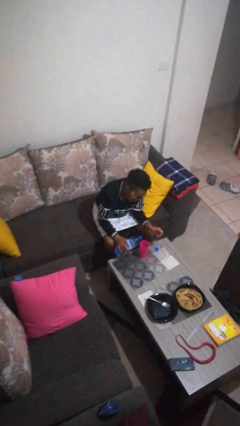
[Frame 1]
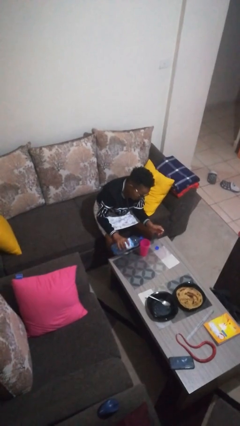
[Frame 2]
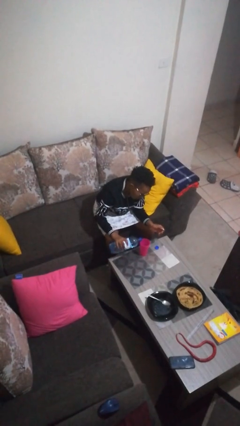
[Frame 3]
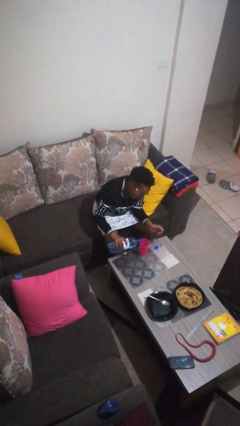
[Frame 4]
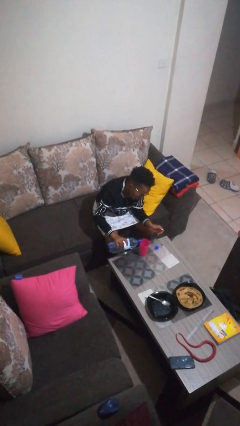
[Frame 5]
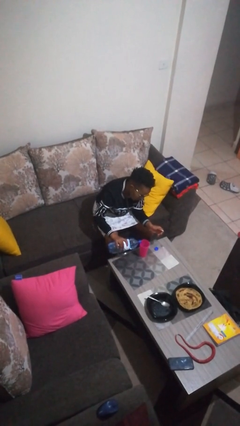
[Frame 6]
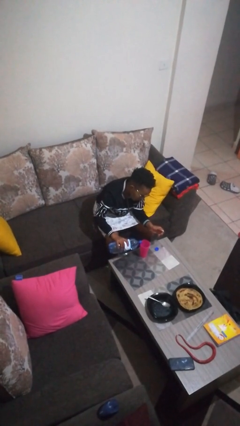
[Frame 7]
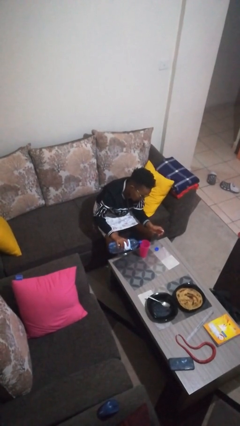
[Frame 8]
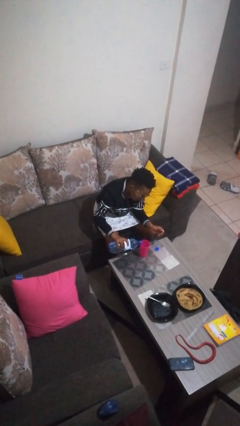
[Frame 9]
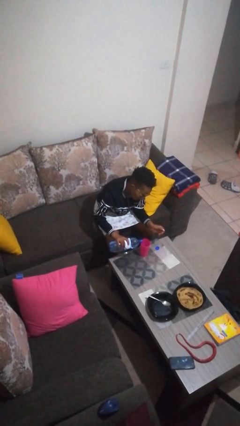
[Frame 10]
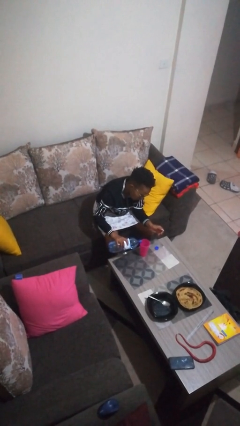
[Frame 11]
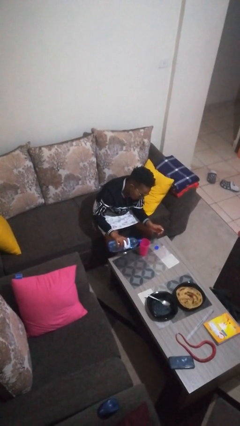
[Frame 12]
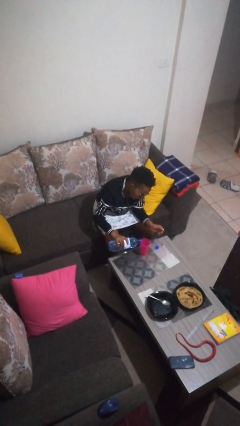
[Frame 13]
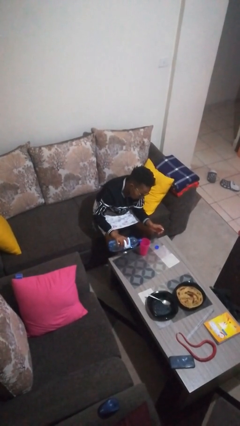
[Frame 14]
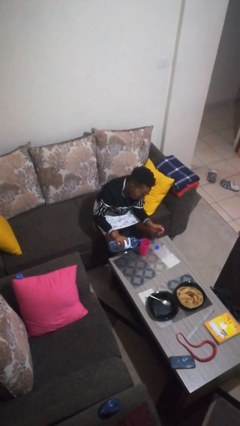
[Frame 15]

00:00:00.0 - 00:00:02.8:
person pours liquid into cup

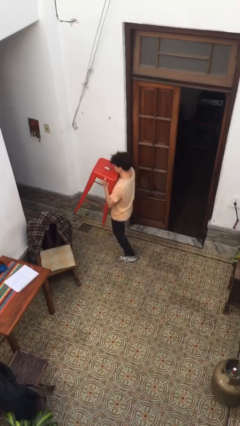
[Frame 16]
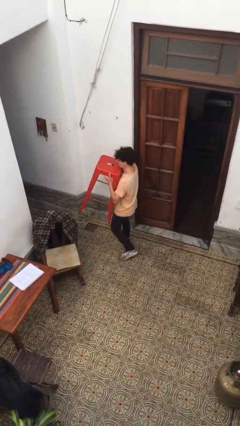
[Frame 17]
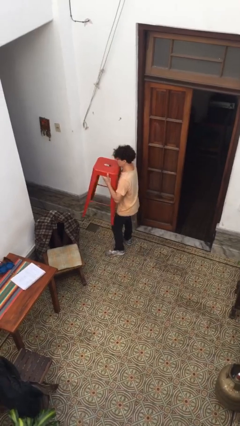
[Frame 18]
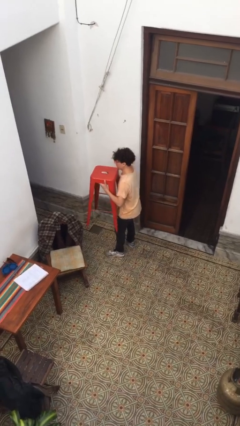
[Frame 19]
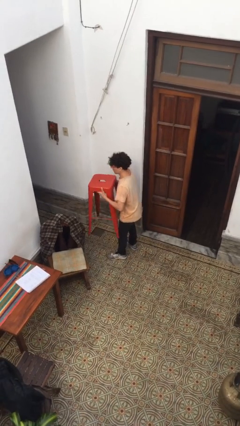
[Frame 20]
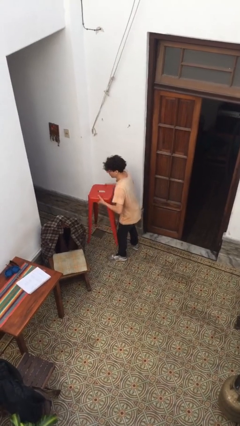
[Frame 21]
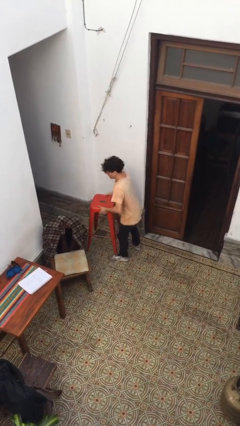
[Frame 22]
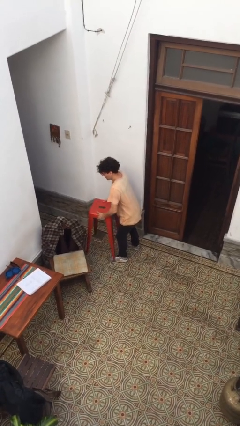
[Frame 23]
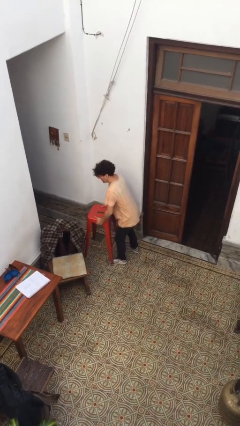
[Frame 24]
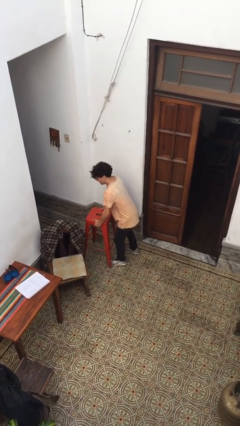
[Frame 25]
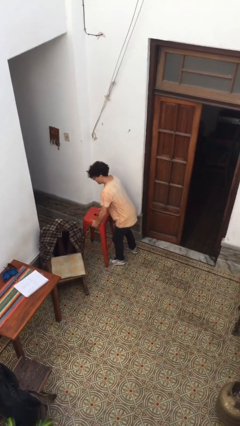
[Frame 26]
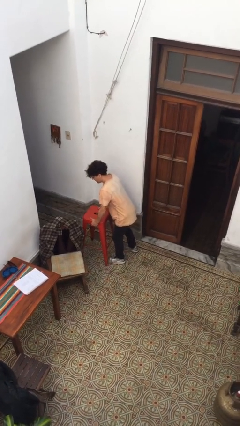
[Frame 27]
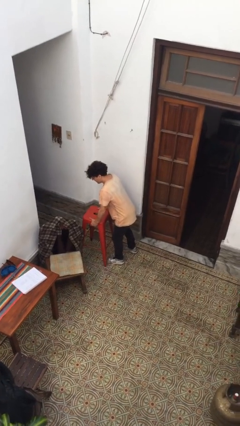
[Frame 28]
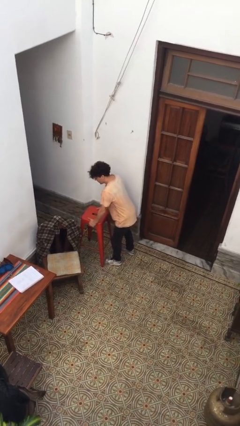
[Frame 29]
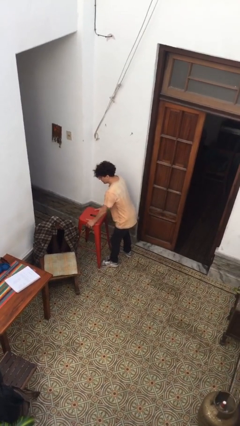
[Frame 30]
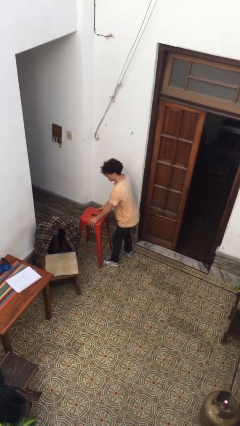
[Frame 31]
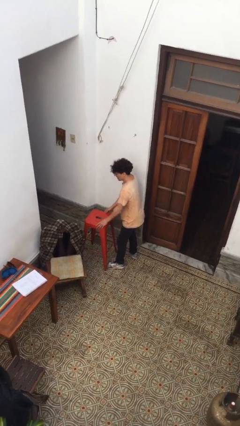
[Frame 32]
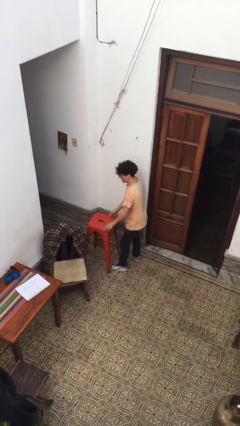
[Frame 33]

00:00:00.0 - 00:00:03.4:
person puts down object on floor

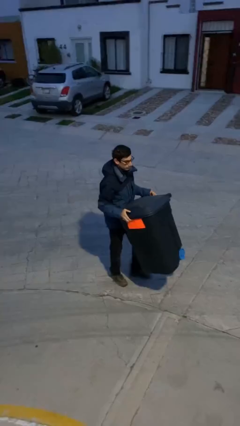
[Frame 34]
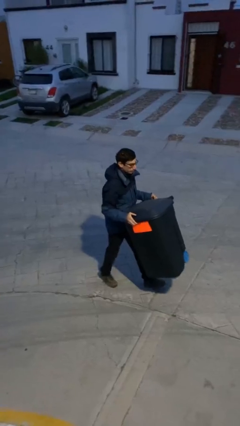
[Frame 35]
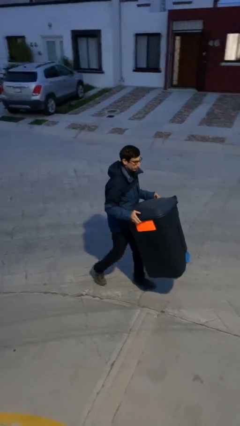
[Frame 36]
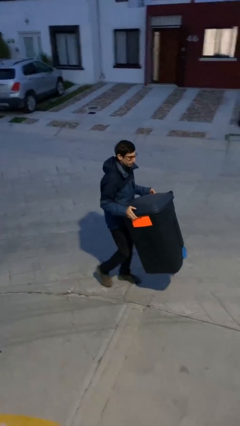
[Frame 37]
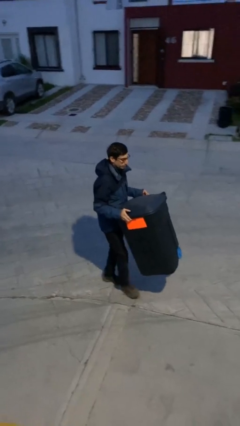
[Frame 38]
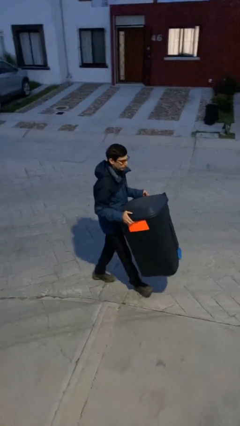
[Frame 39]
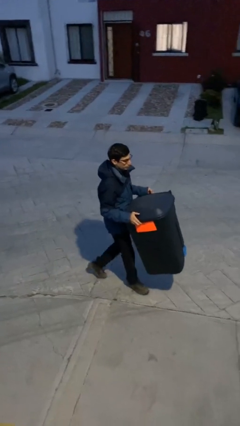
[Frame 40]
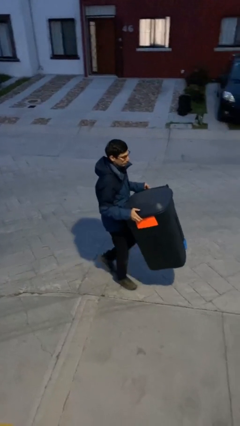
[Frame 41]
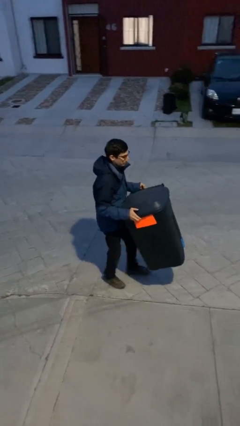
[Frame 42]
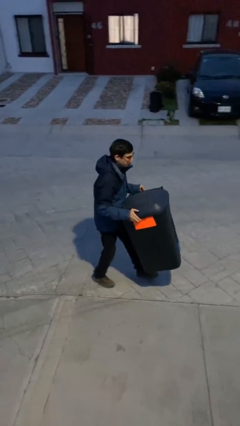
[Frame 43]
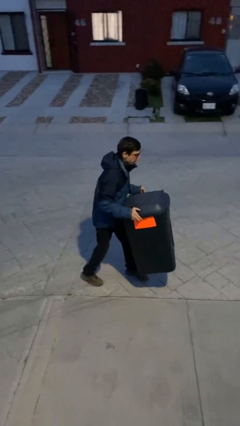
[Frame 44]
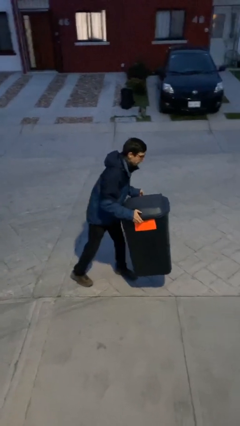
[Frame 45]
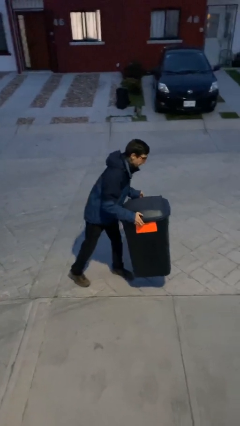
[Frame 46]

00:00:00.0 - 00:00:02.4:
person carries heavy object

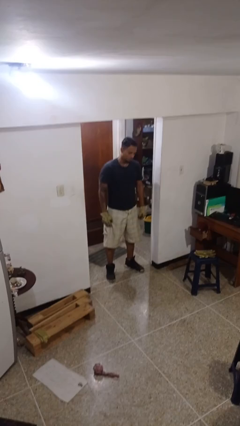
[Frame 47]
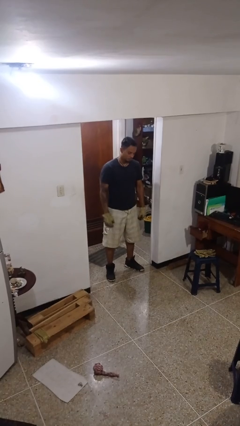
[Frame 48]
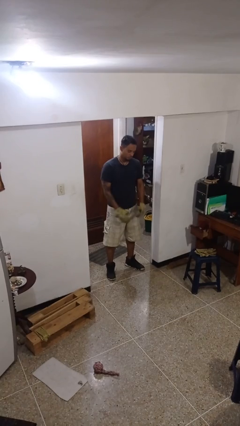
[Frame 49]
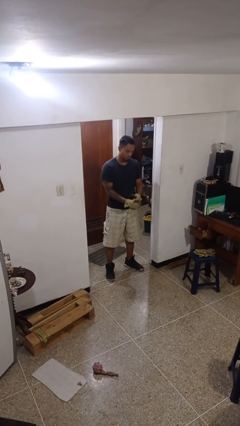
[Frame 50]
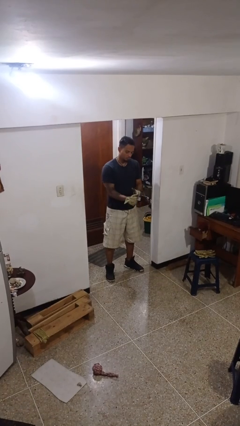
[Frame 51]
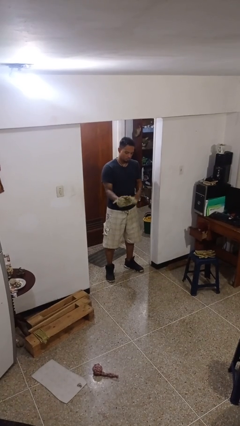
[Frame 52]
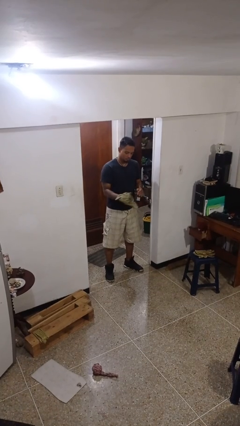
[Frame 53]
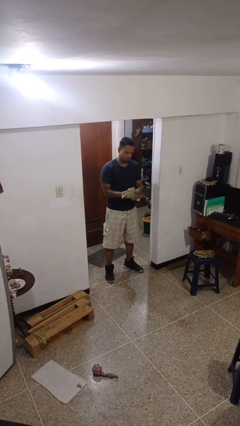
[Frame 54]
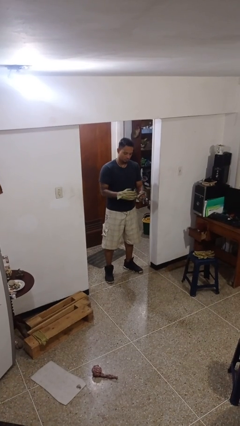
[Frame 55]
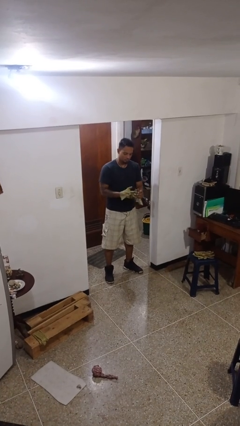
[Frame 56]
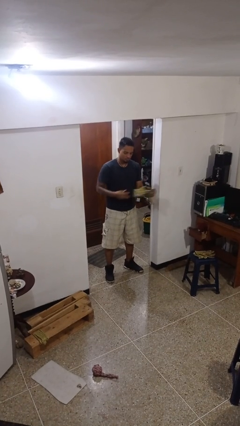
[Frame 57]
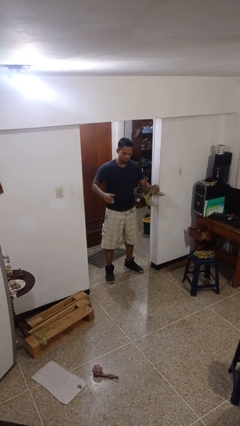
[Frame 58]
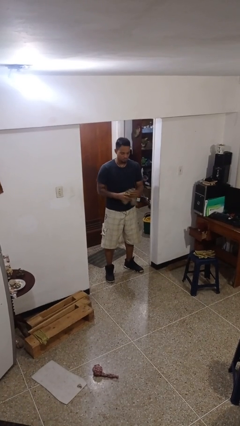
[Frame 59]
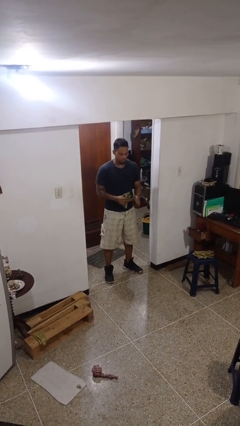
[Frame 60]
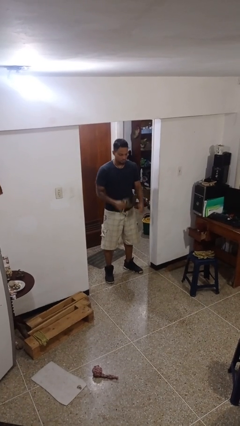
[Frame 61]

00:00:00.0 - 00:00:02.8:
person takes off gloves

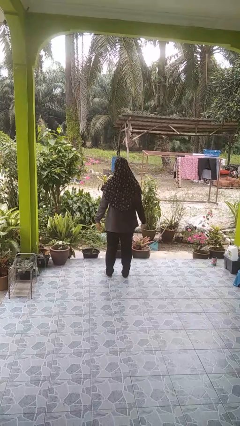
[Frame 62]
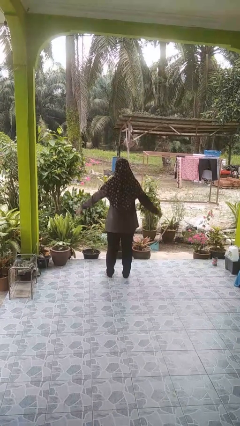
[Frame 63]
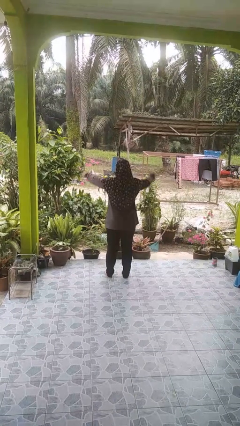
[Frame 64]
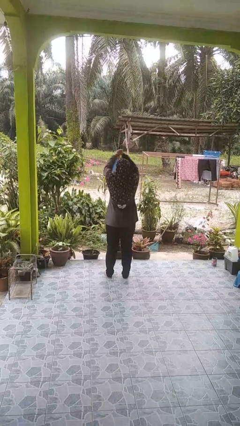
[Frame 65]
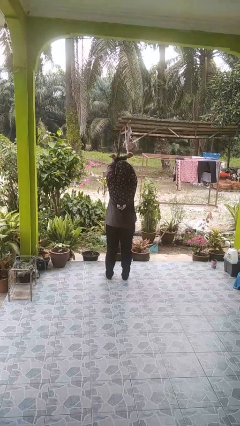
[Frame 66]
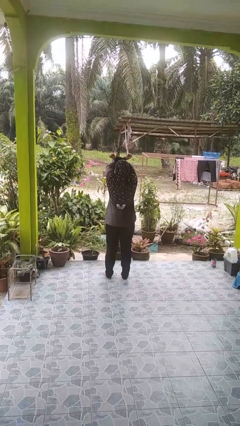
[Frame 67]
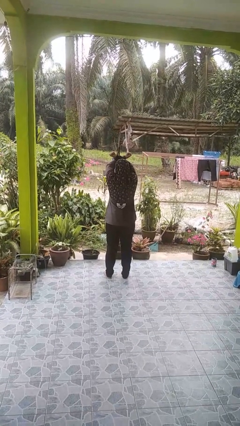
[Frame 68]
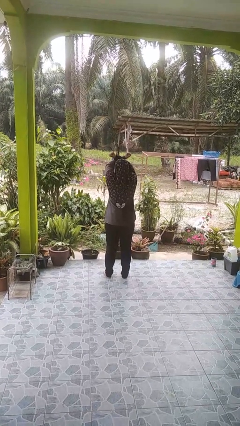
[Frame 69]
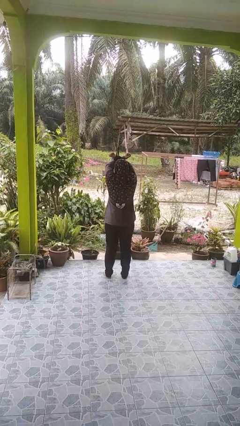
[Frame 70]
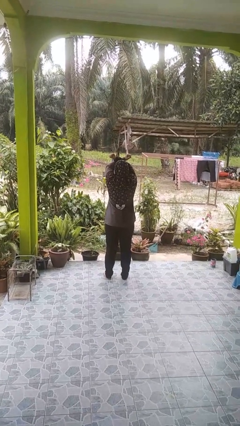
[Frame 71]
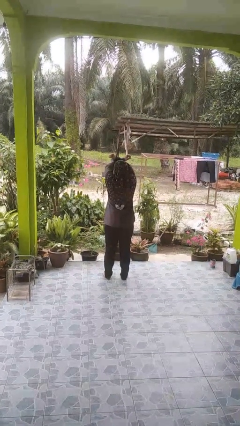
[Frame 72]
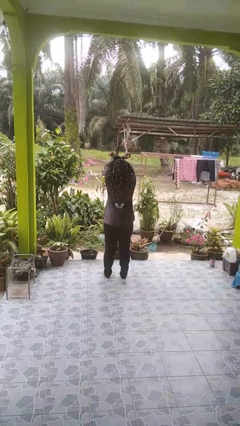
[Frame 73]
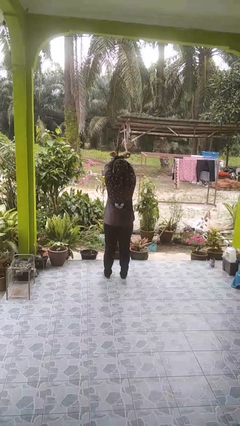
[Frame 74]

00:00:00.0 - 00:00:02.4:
person crosses arms

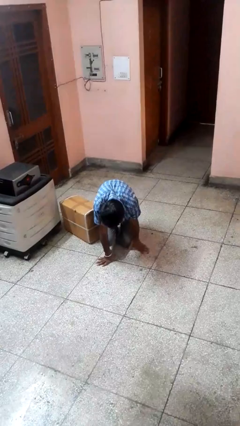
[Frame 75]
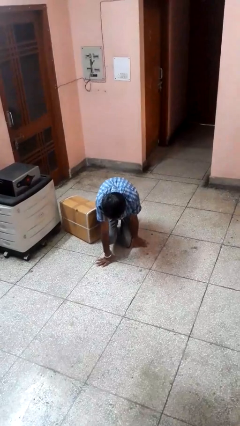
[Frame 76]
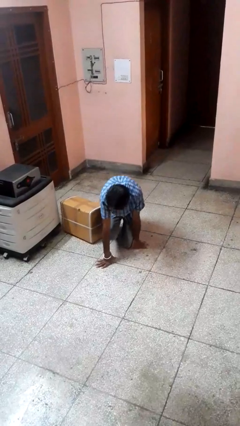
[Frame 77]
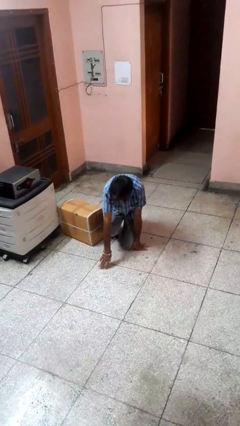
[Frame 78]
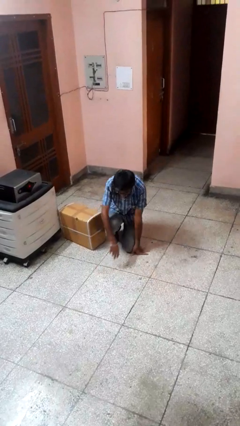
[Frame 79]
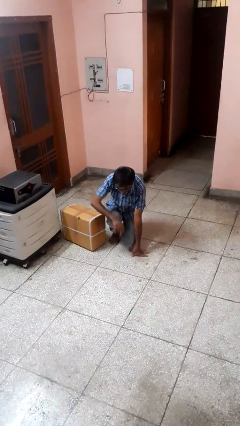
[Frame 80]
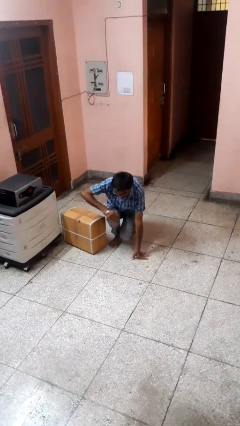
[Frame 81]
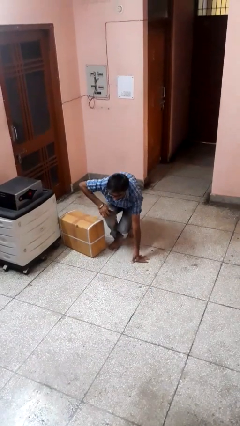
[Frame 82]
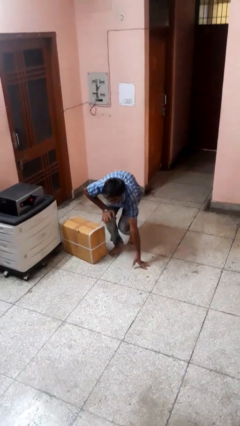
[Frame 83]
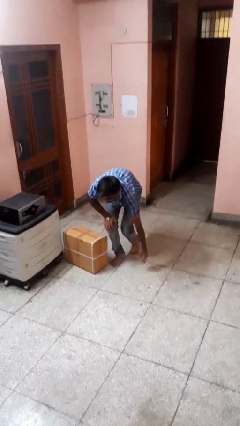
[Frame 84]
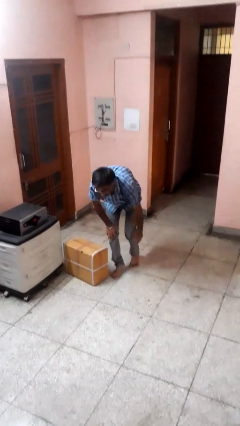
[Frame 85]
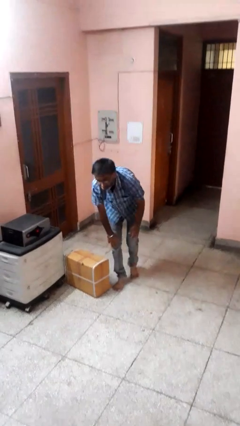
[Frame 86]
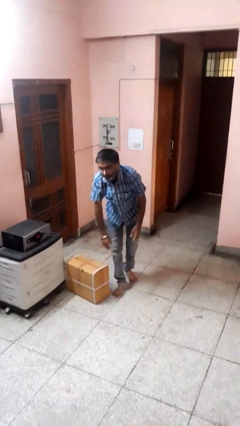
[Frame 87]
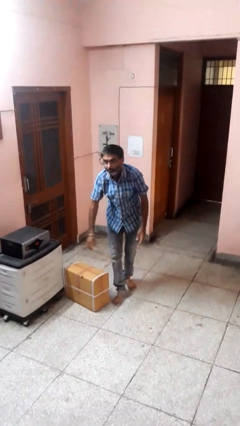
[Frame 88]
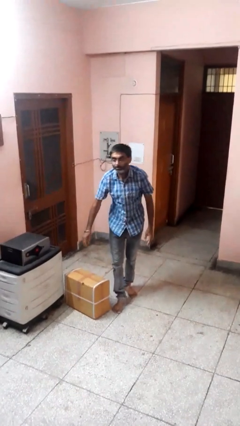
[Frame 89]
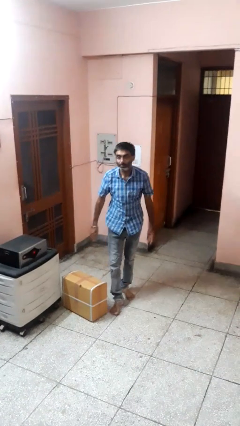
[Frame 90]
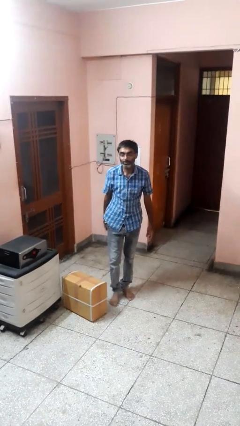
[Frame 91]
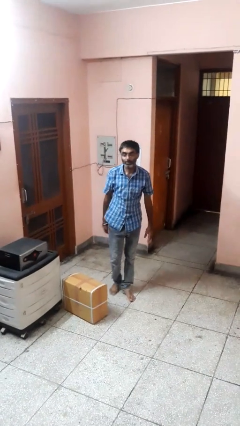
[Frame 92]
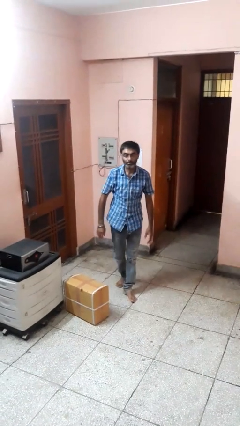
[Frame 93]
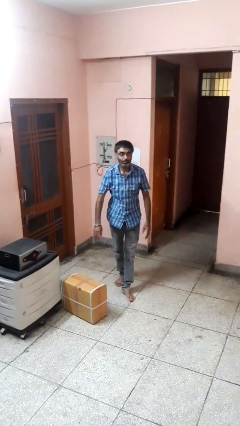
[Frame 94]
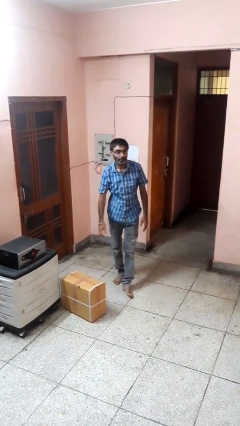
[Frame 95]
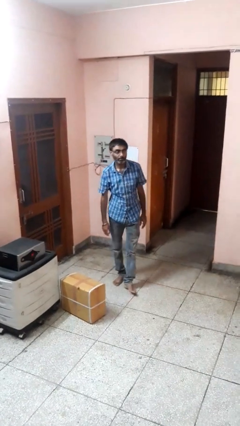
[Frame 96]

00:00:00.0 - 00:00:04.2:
person stands up from floor
